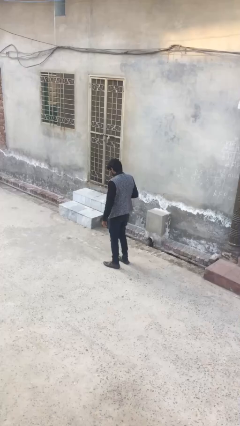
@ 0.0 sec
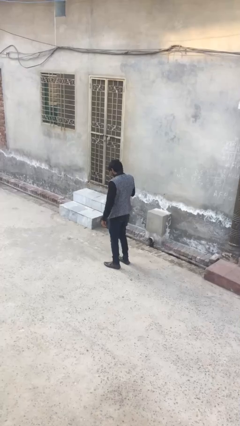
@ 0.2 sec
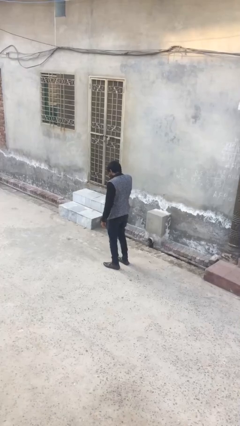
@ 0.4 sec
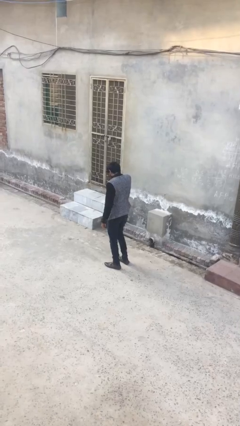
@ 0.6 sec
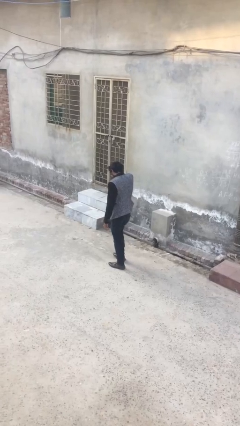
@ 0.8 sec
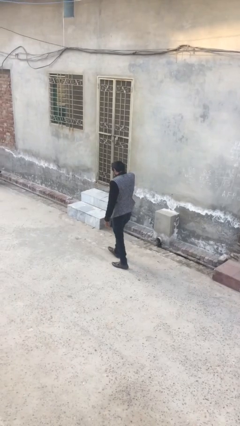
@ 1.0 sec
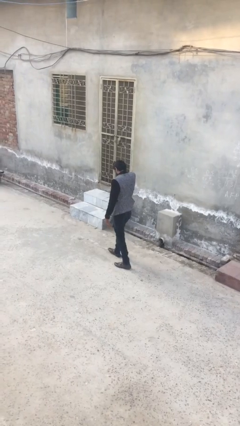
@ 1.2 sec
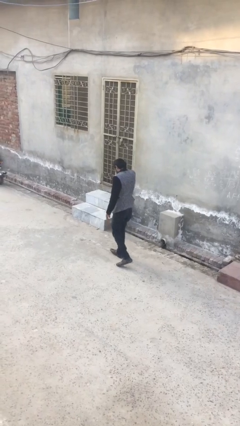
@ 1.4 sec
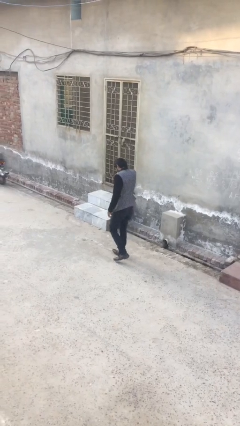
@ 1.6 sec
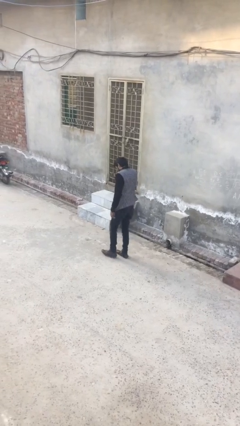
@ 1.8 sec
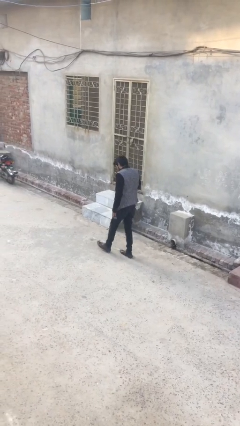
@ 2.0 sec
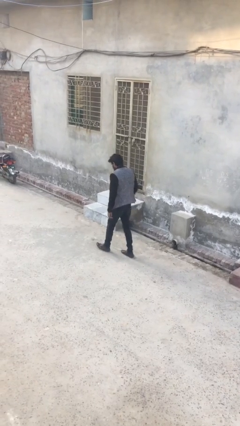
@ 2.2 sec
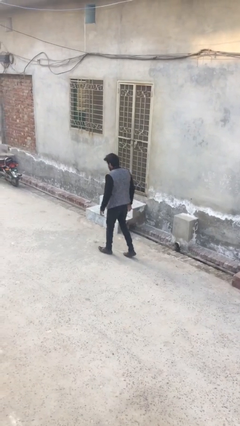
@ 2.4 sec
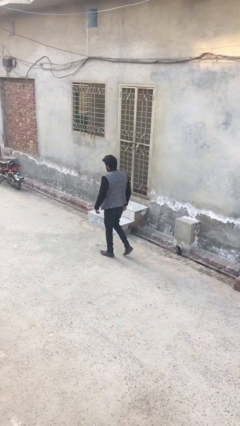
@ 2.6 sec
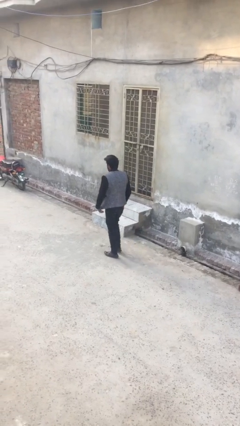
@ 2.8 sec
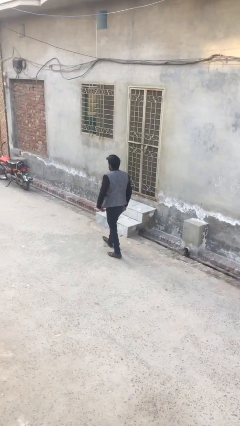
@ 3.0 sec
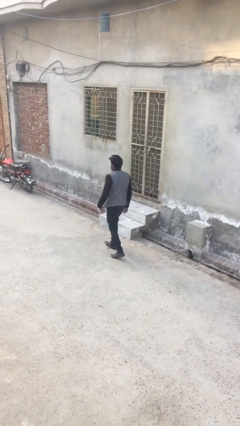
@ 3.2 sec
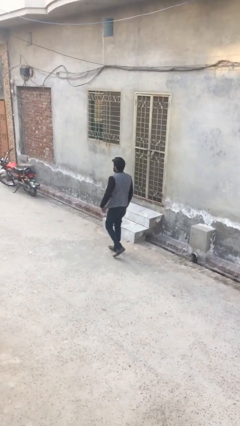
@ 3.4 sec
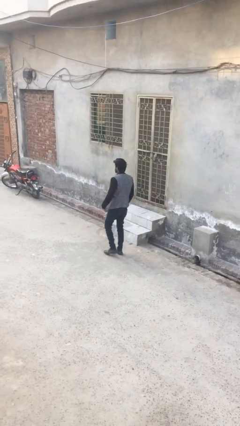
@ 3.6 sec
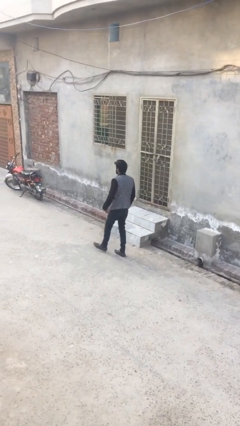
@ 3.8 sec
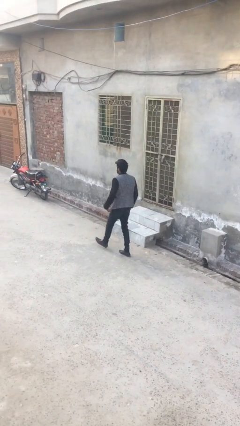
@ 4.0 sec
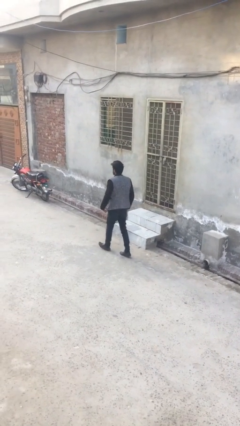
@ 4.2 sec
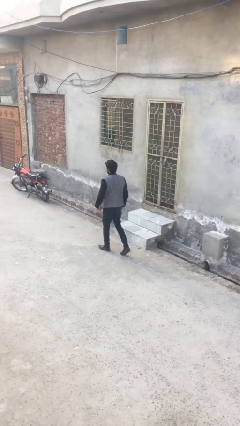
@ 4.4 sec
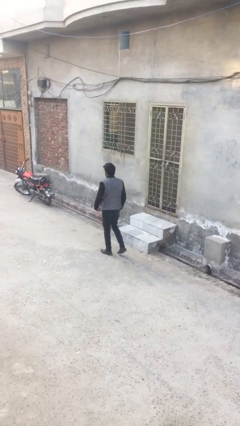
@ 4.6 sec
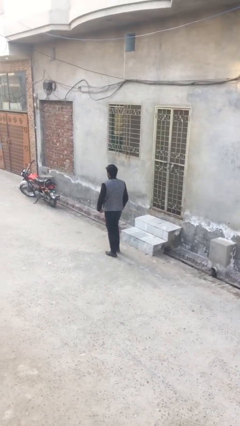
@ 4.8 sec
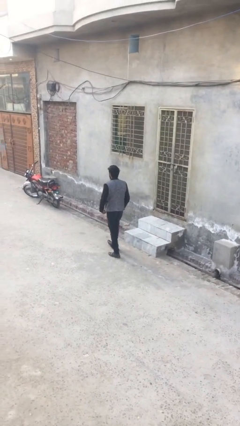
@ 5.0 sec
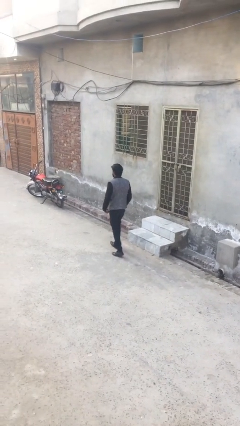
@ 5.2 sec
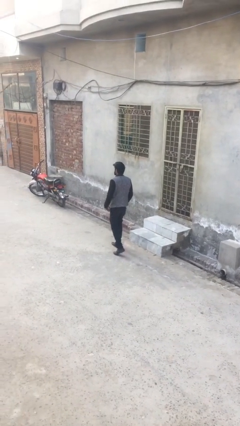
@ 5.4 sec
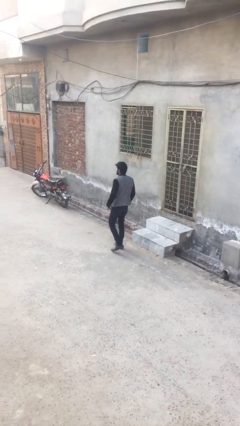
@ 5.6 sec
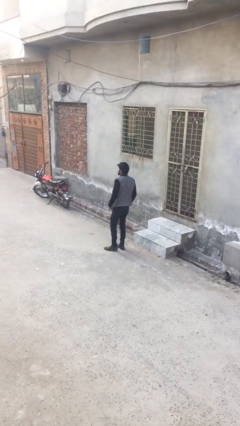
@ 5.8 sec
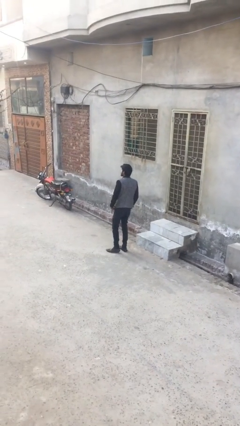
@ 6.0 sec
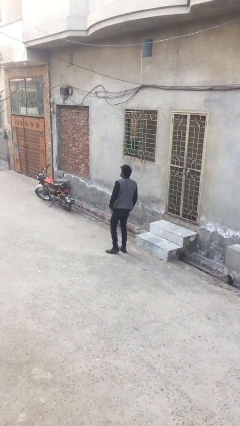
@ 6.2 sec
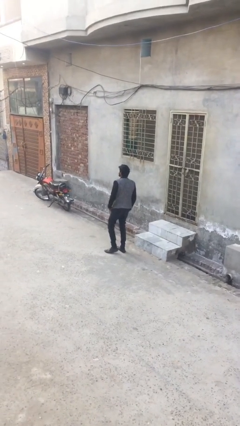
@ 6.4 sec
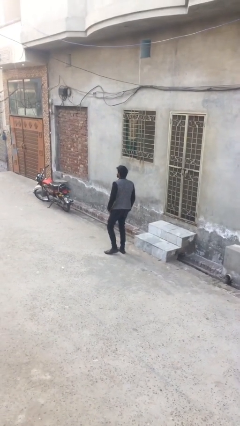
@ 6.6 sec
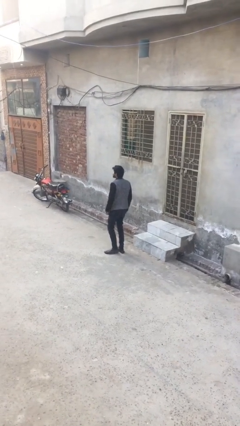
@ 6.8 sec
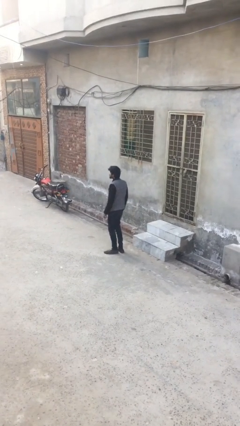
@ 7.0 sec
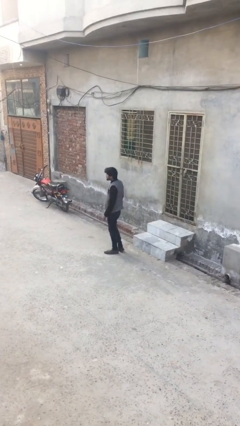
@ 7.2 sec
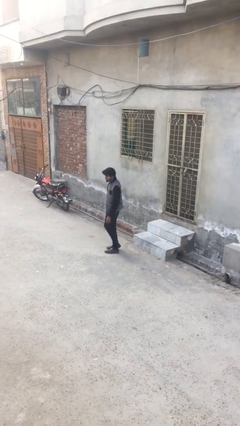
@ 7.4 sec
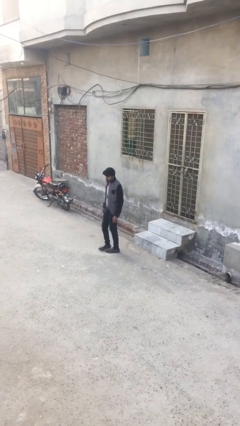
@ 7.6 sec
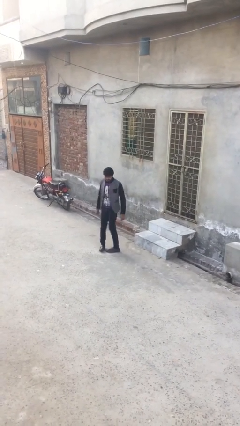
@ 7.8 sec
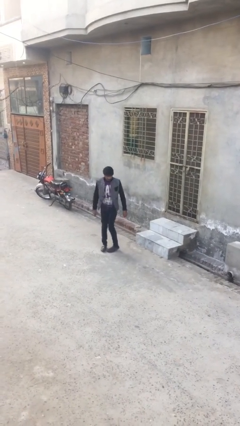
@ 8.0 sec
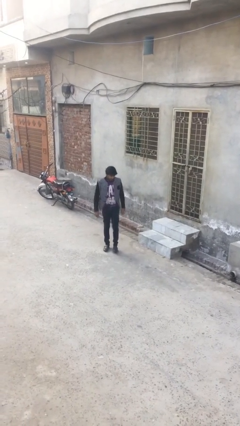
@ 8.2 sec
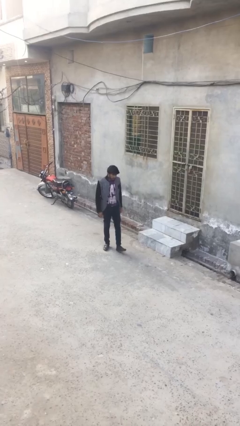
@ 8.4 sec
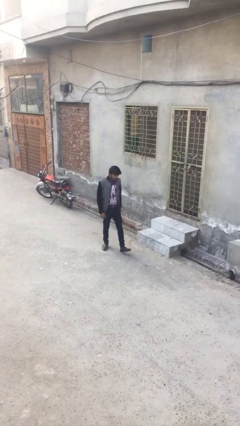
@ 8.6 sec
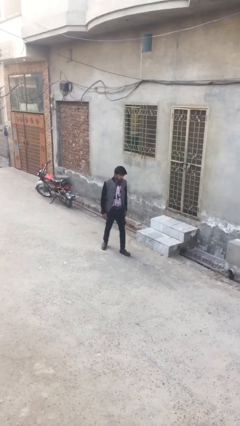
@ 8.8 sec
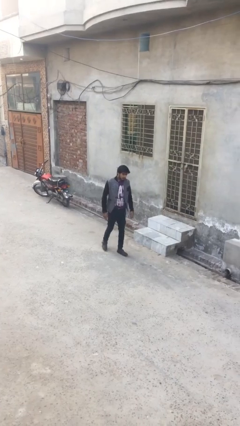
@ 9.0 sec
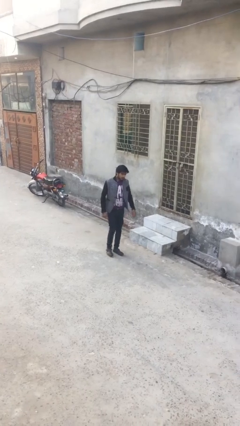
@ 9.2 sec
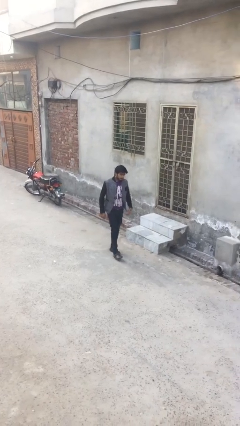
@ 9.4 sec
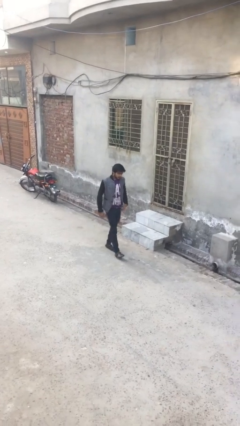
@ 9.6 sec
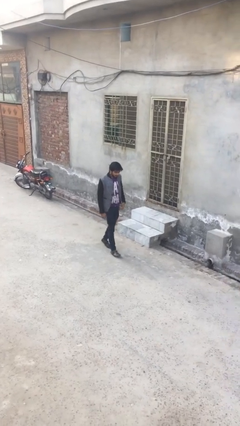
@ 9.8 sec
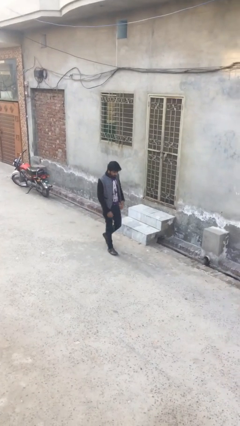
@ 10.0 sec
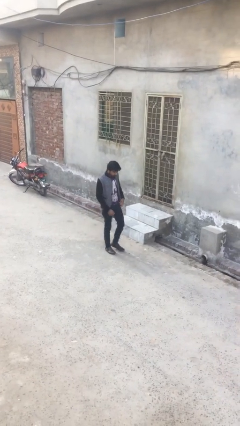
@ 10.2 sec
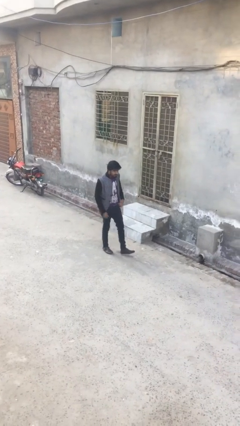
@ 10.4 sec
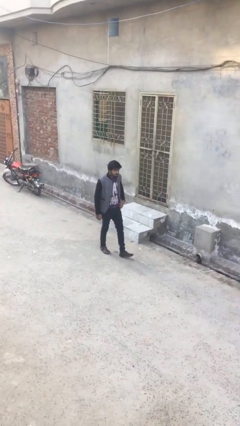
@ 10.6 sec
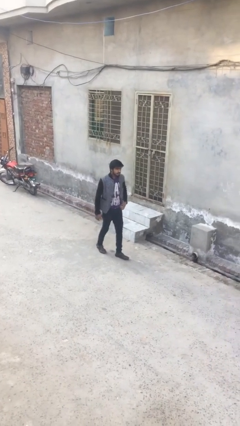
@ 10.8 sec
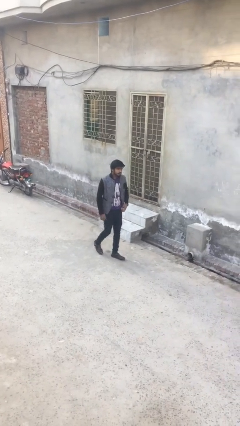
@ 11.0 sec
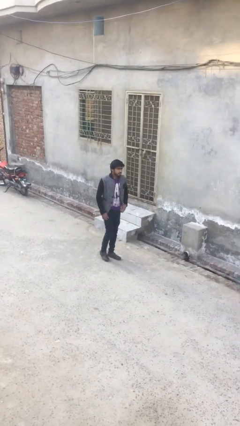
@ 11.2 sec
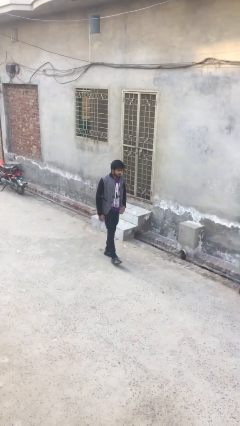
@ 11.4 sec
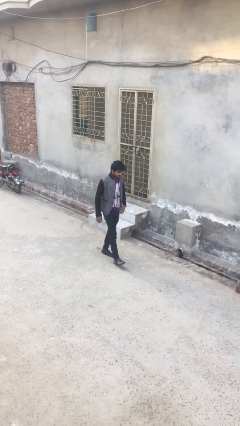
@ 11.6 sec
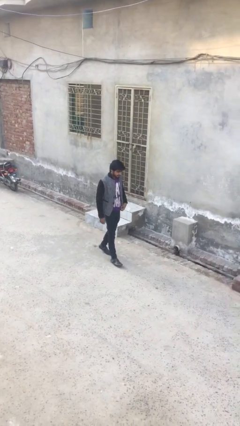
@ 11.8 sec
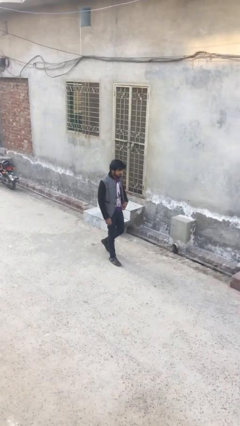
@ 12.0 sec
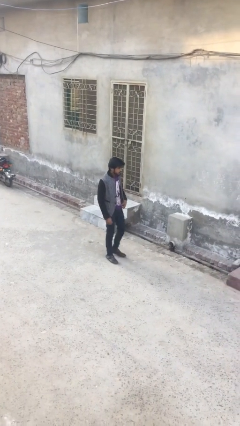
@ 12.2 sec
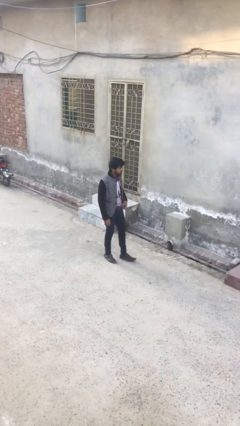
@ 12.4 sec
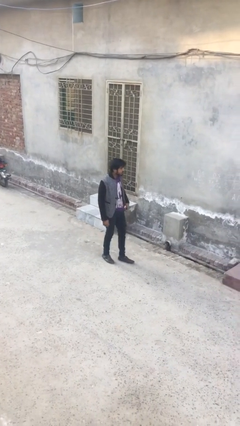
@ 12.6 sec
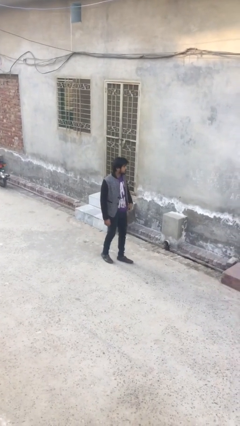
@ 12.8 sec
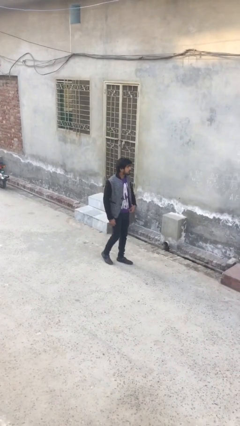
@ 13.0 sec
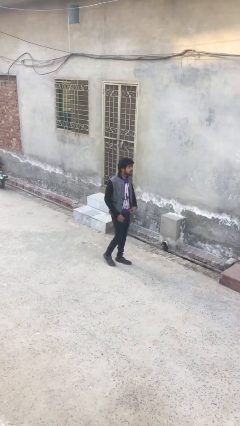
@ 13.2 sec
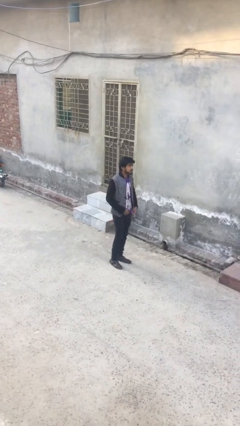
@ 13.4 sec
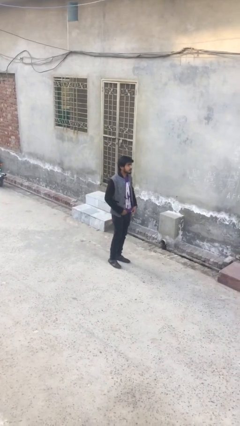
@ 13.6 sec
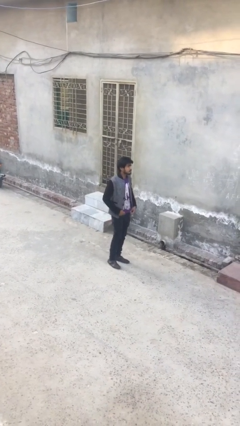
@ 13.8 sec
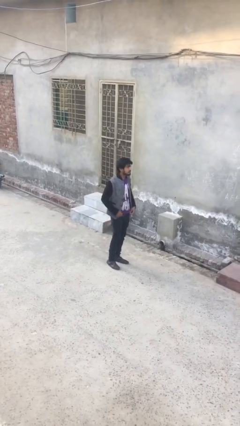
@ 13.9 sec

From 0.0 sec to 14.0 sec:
person walks

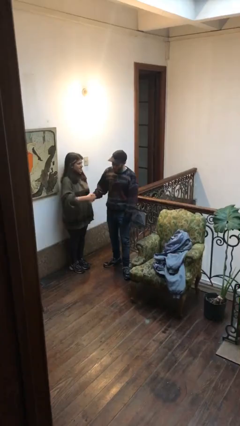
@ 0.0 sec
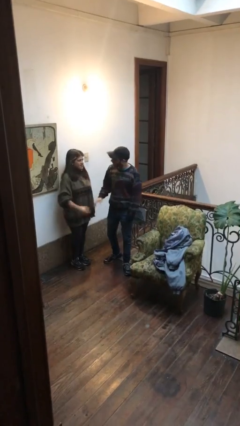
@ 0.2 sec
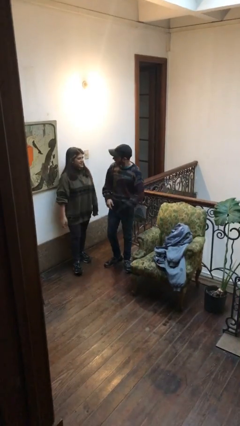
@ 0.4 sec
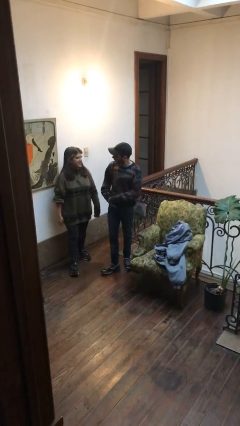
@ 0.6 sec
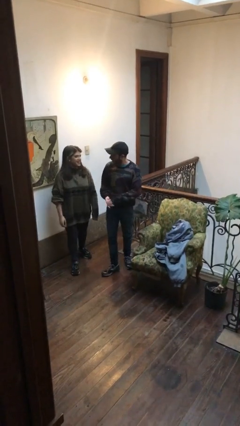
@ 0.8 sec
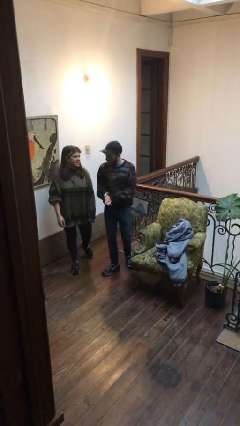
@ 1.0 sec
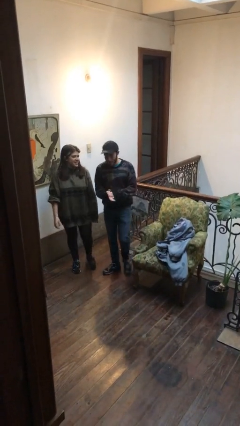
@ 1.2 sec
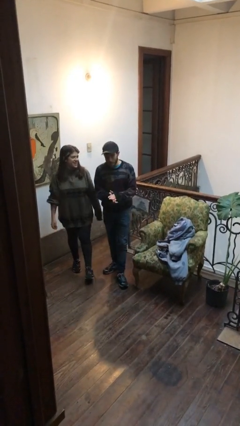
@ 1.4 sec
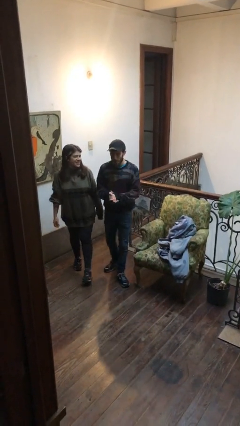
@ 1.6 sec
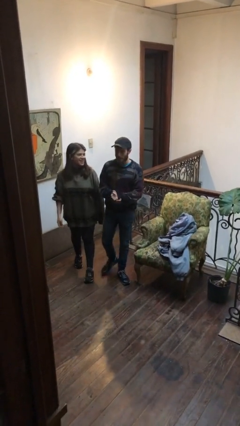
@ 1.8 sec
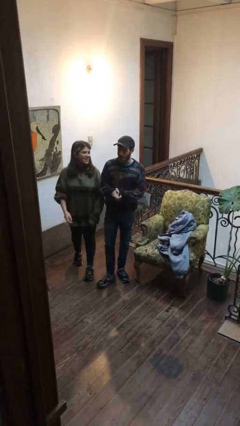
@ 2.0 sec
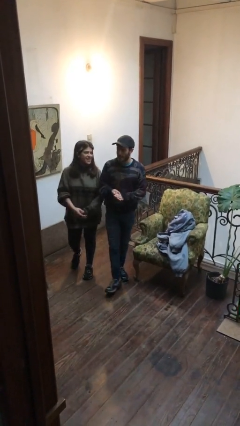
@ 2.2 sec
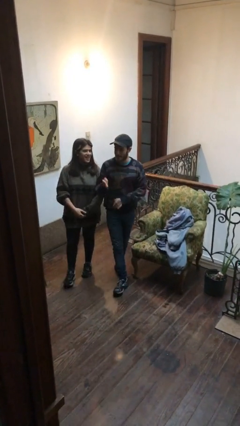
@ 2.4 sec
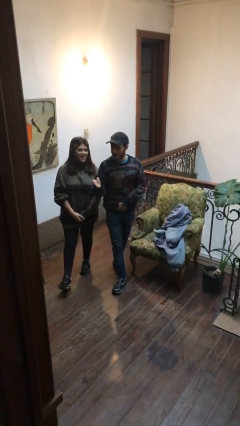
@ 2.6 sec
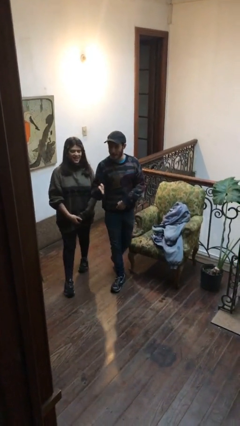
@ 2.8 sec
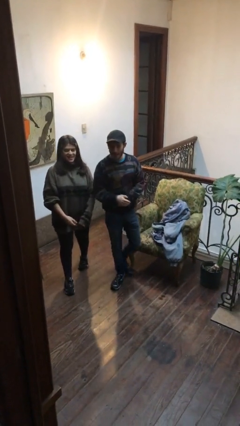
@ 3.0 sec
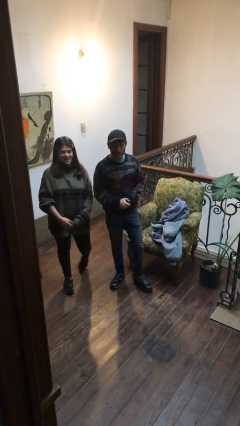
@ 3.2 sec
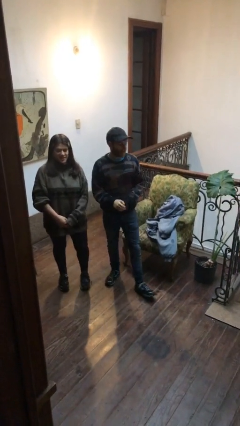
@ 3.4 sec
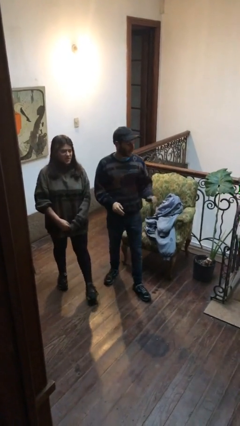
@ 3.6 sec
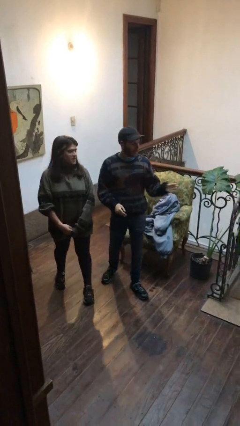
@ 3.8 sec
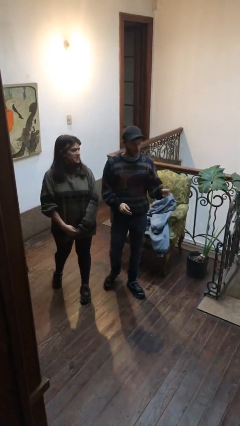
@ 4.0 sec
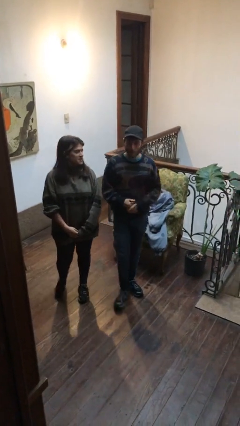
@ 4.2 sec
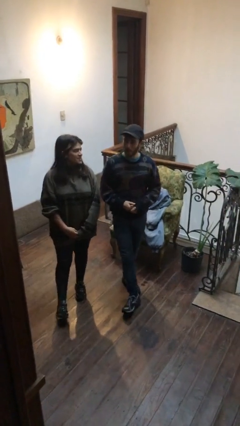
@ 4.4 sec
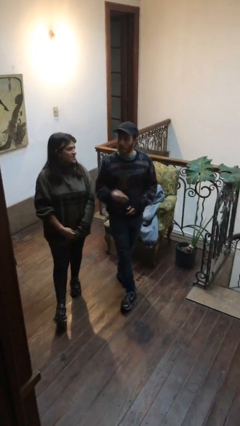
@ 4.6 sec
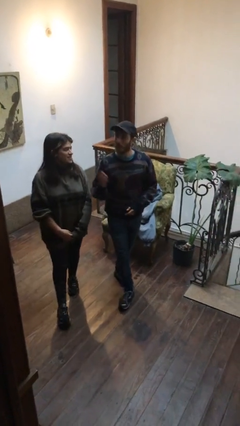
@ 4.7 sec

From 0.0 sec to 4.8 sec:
person talks to person
